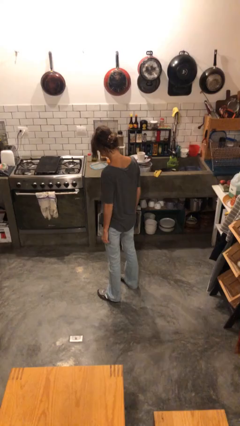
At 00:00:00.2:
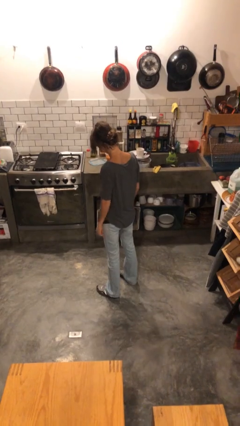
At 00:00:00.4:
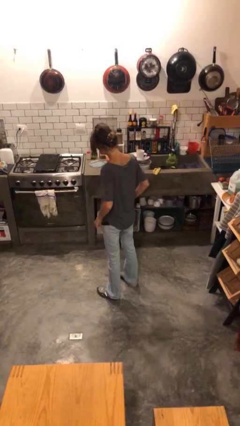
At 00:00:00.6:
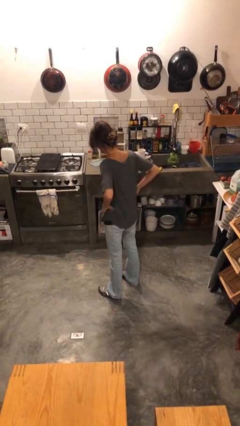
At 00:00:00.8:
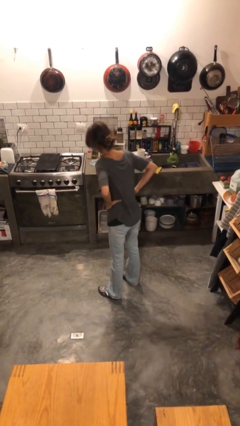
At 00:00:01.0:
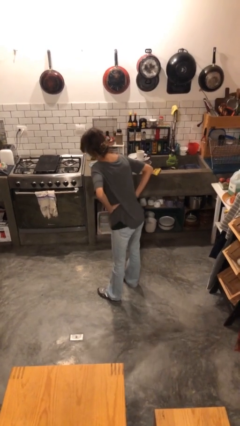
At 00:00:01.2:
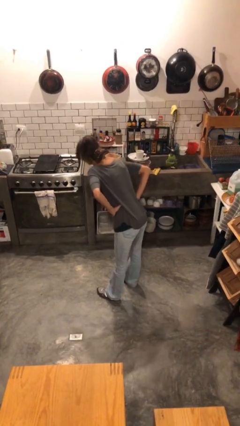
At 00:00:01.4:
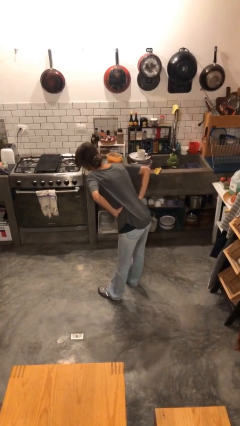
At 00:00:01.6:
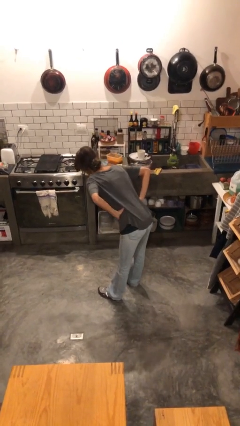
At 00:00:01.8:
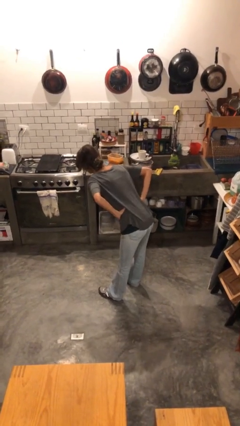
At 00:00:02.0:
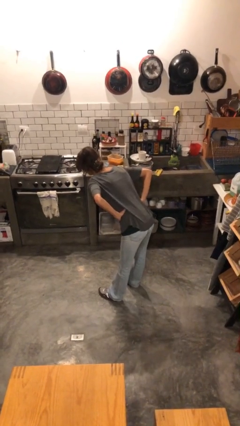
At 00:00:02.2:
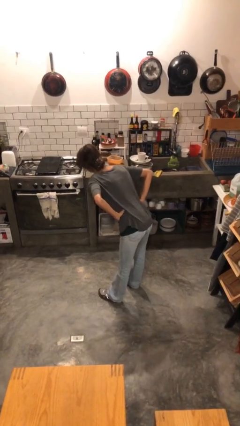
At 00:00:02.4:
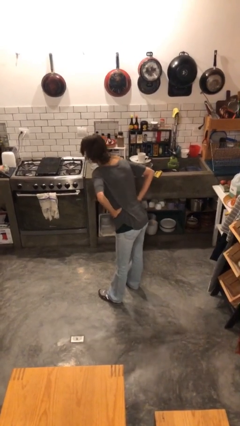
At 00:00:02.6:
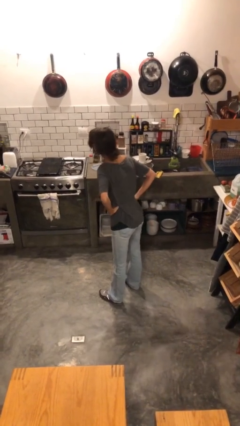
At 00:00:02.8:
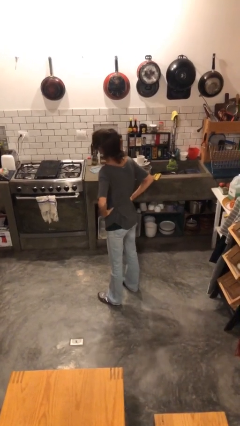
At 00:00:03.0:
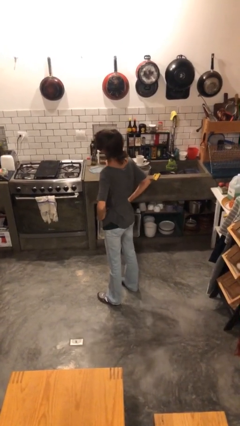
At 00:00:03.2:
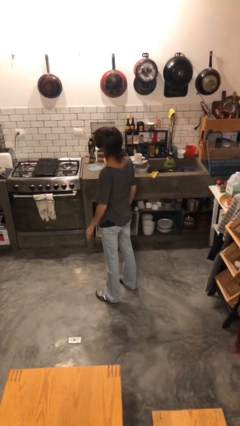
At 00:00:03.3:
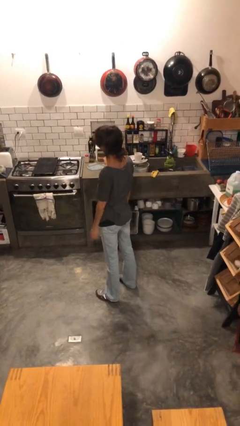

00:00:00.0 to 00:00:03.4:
person stretches back

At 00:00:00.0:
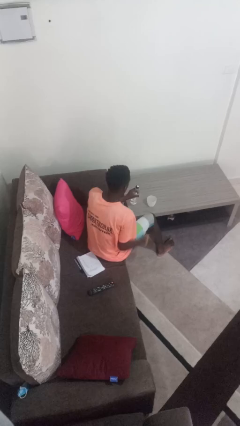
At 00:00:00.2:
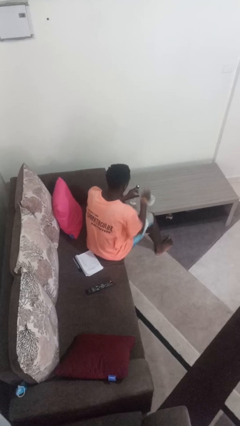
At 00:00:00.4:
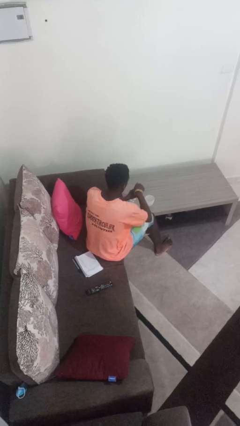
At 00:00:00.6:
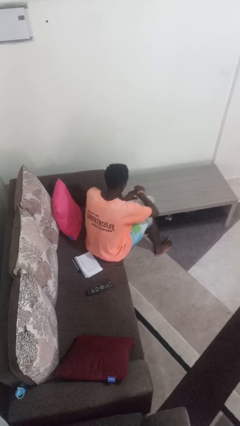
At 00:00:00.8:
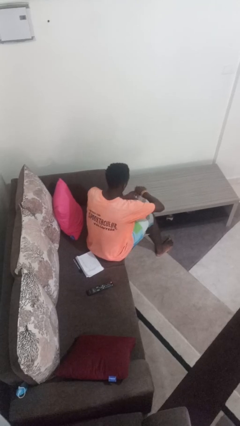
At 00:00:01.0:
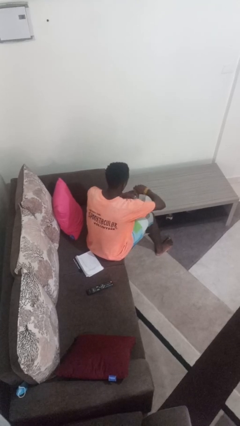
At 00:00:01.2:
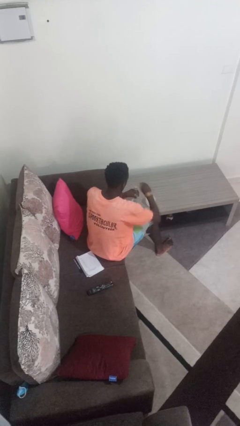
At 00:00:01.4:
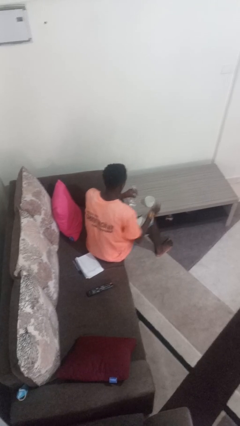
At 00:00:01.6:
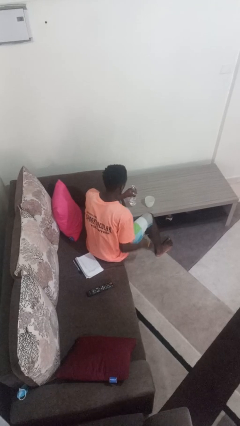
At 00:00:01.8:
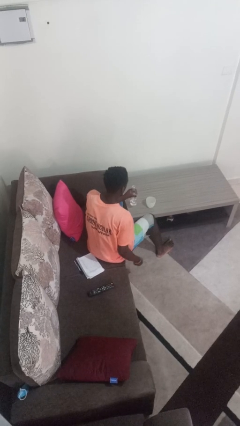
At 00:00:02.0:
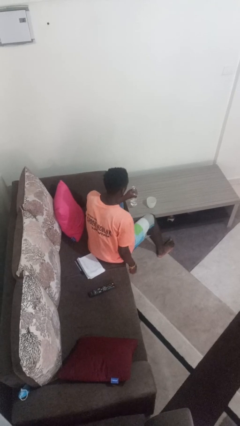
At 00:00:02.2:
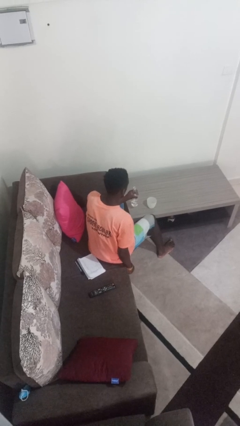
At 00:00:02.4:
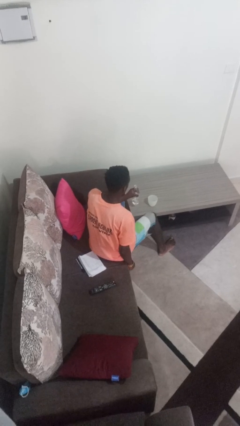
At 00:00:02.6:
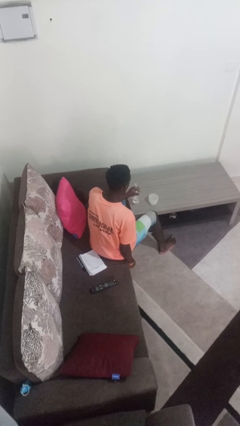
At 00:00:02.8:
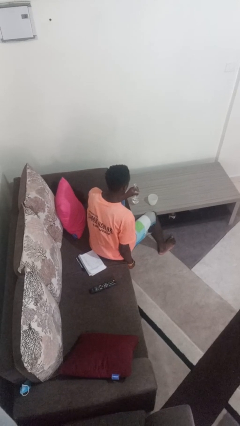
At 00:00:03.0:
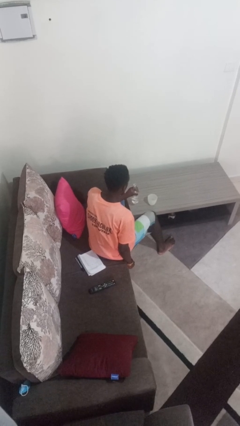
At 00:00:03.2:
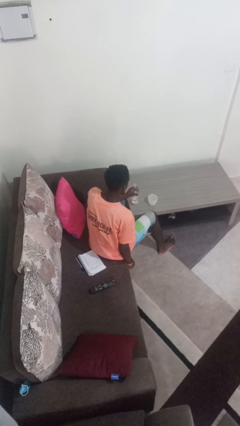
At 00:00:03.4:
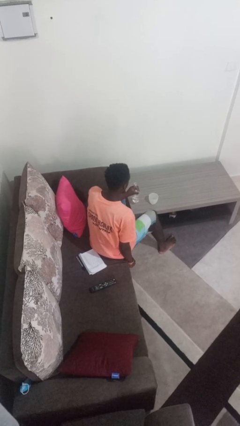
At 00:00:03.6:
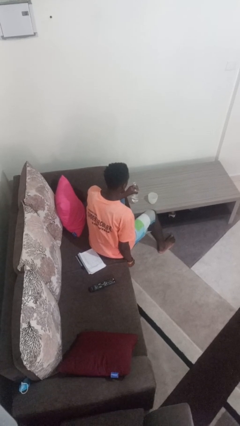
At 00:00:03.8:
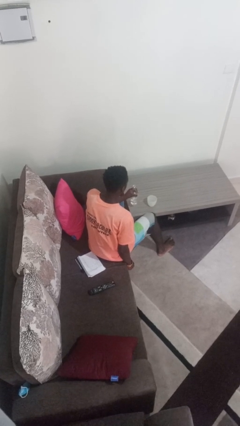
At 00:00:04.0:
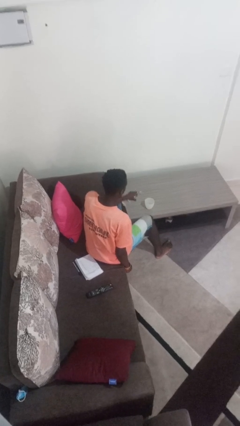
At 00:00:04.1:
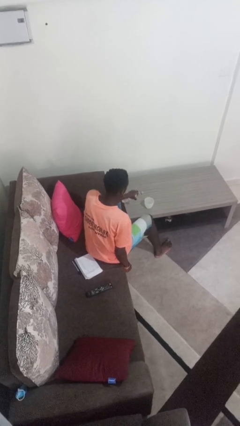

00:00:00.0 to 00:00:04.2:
person unscrews lid from bottle

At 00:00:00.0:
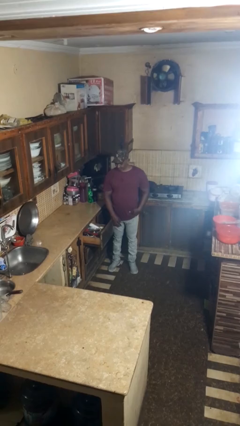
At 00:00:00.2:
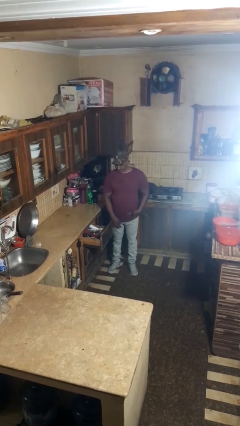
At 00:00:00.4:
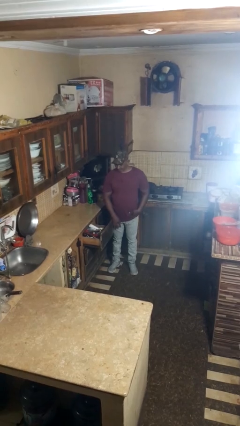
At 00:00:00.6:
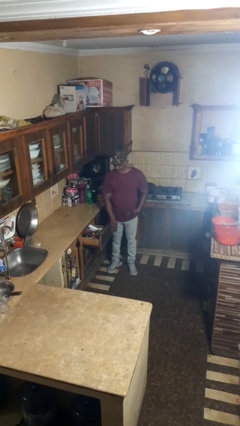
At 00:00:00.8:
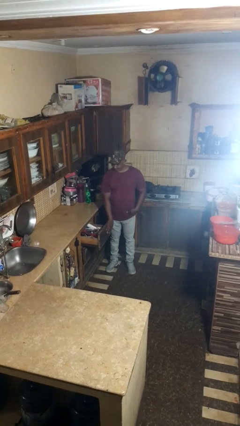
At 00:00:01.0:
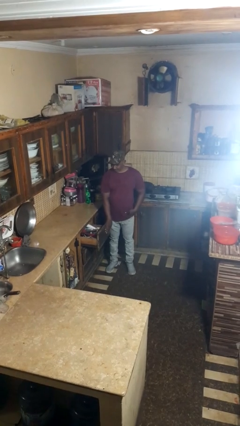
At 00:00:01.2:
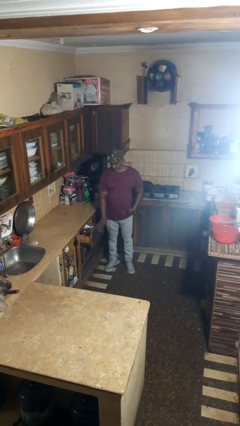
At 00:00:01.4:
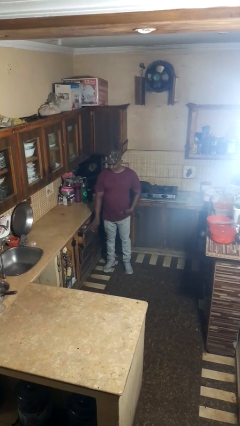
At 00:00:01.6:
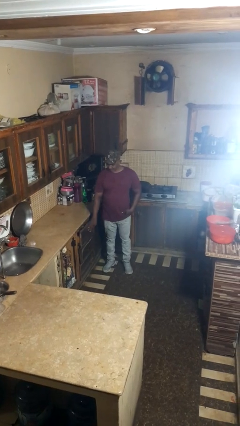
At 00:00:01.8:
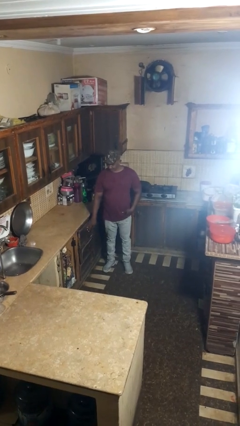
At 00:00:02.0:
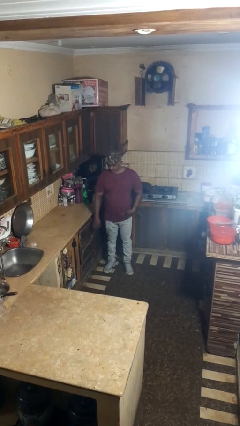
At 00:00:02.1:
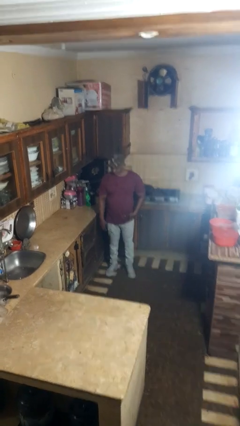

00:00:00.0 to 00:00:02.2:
person closes kitchen drawer

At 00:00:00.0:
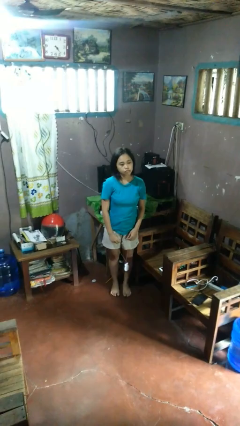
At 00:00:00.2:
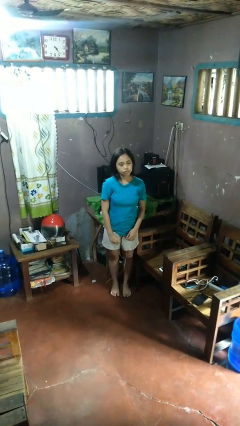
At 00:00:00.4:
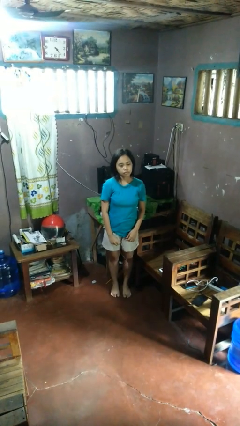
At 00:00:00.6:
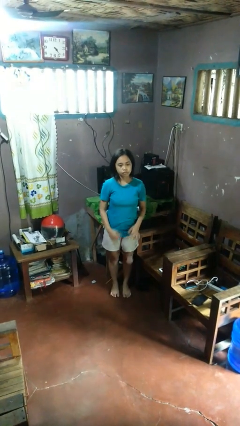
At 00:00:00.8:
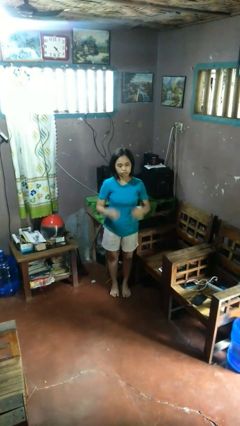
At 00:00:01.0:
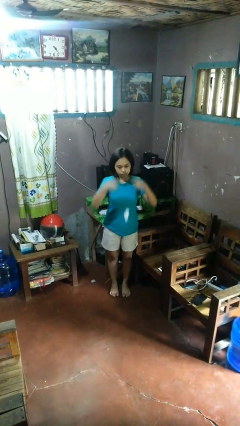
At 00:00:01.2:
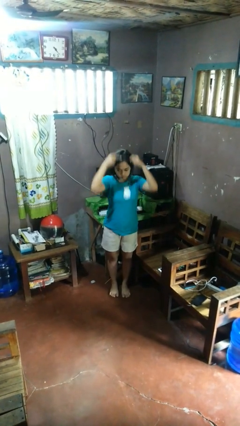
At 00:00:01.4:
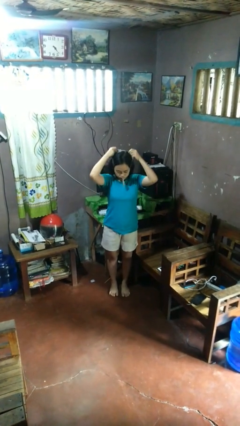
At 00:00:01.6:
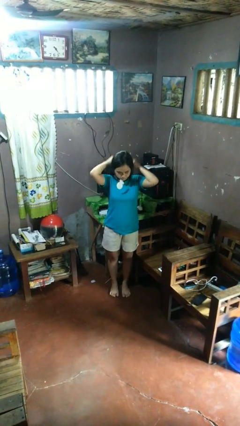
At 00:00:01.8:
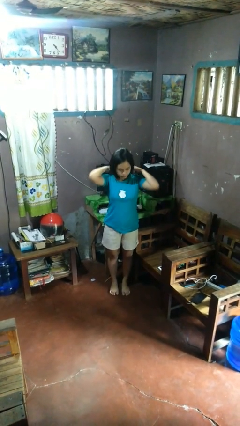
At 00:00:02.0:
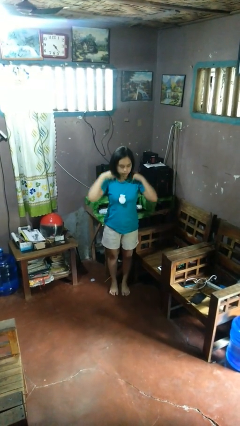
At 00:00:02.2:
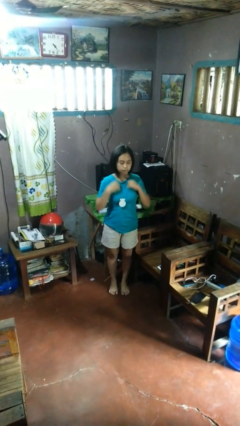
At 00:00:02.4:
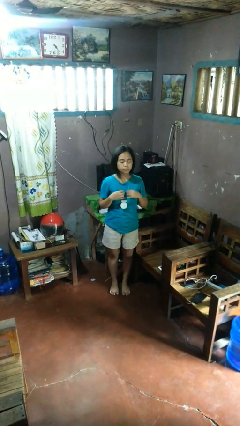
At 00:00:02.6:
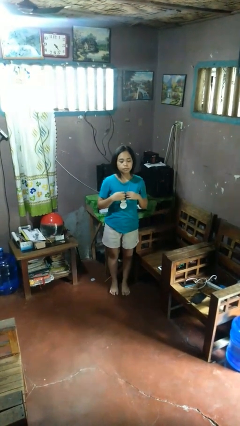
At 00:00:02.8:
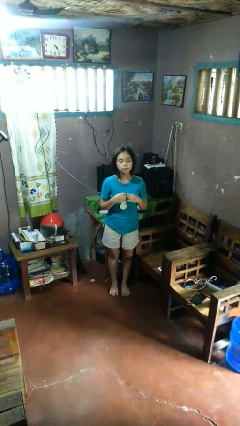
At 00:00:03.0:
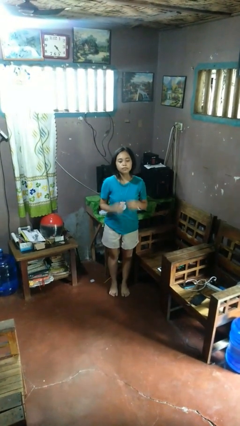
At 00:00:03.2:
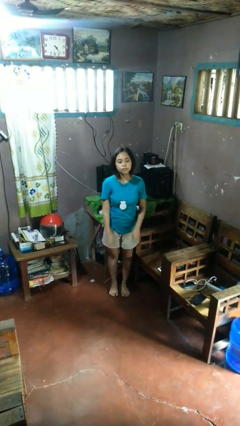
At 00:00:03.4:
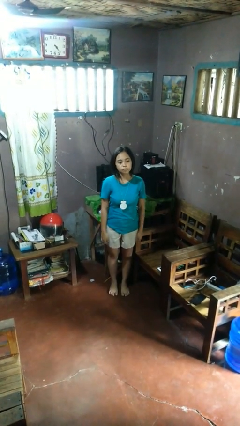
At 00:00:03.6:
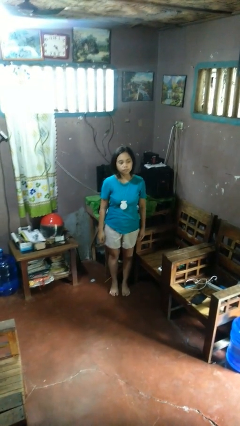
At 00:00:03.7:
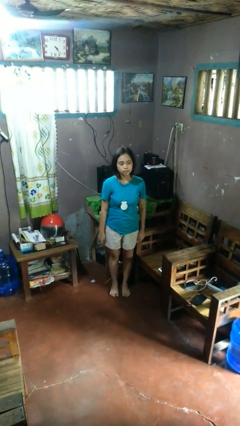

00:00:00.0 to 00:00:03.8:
person puts on necklace

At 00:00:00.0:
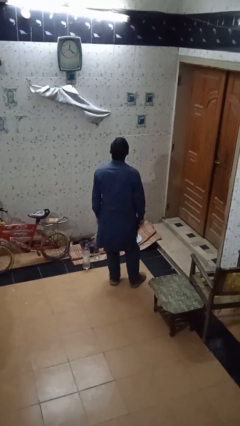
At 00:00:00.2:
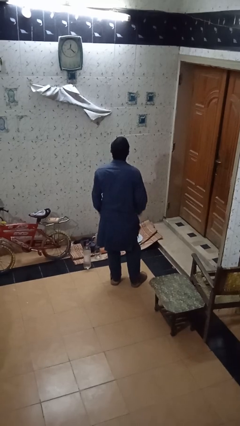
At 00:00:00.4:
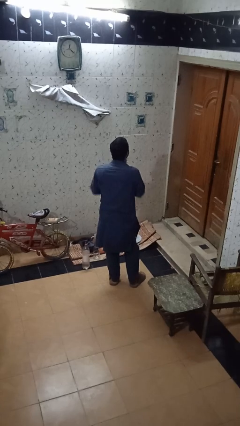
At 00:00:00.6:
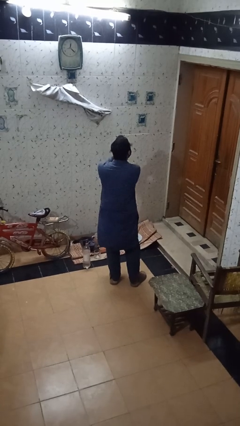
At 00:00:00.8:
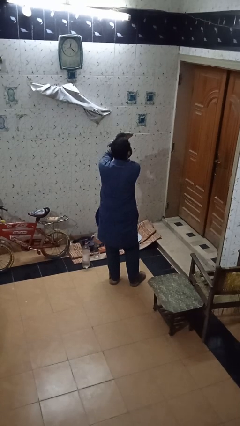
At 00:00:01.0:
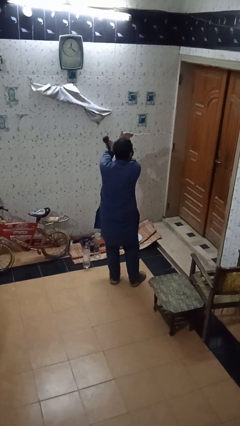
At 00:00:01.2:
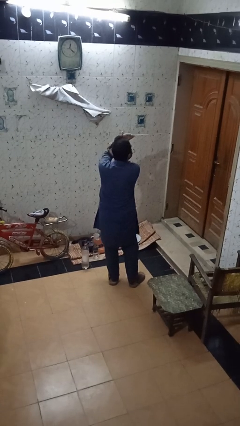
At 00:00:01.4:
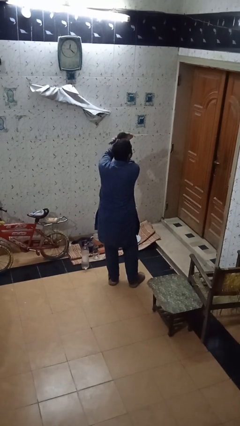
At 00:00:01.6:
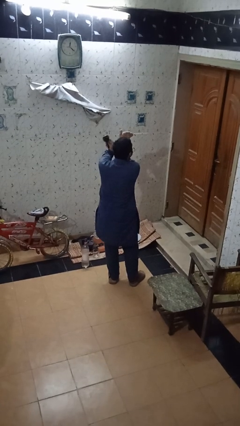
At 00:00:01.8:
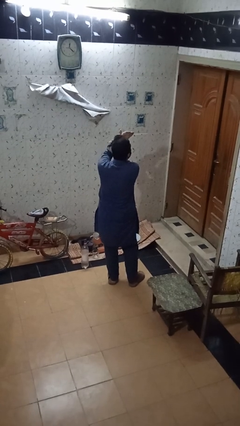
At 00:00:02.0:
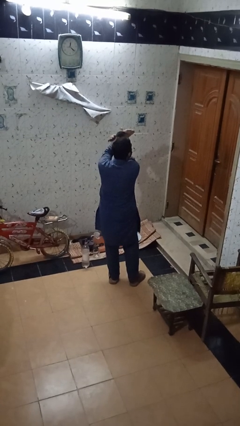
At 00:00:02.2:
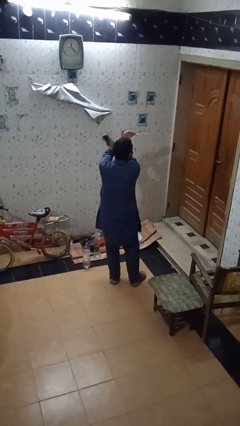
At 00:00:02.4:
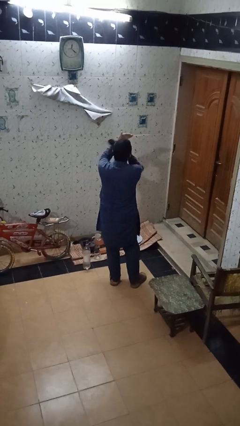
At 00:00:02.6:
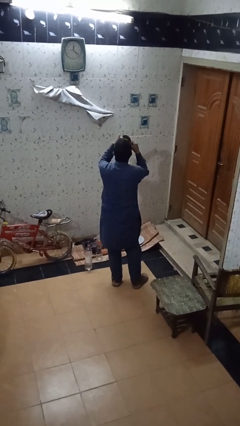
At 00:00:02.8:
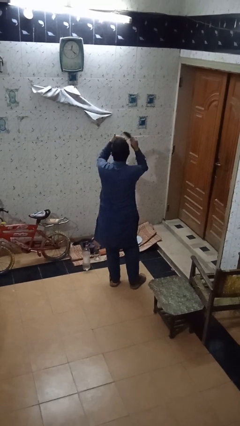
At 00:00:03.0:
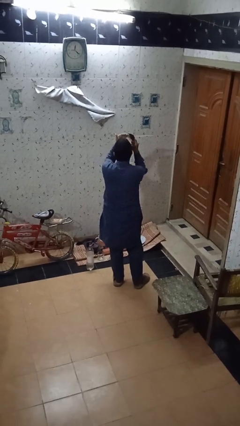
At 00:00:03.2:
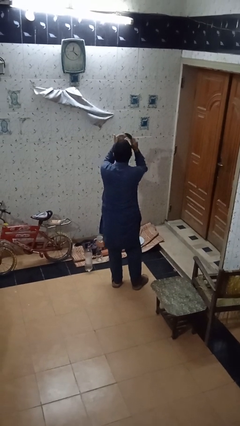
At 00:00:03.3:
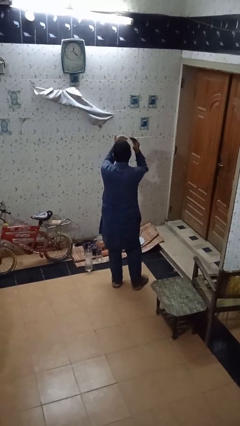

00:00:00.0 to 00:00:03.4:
person brushes hair
